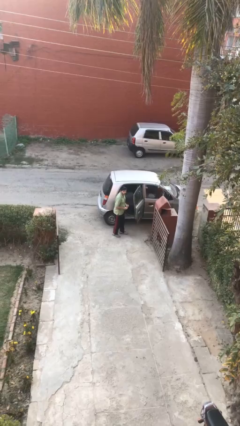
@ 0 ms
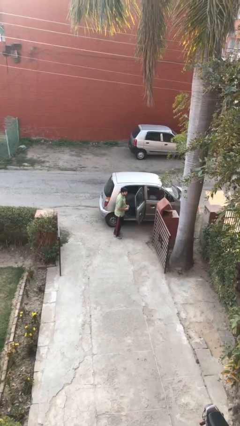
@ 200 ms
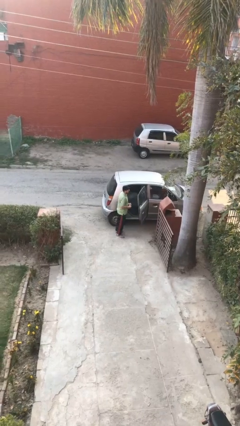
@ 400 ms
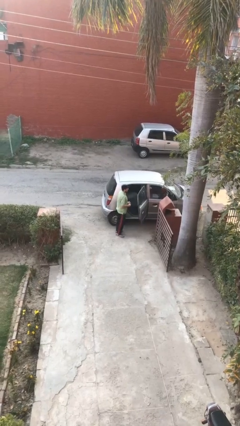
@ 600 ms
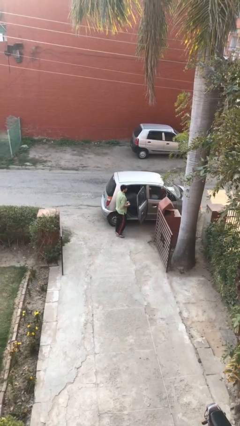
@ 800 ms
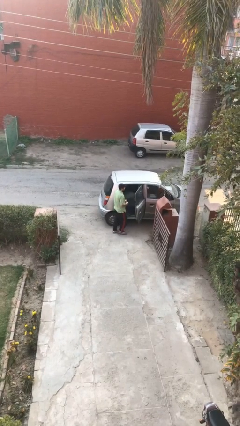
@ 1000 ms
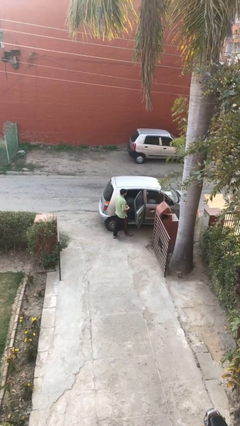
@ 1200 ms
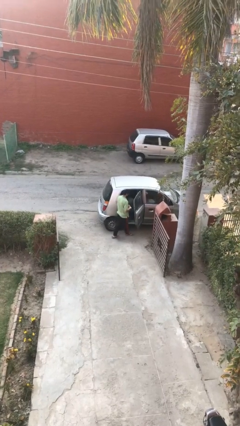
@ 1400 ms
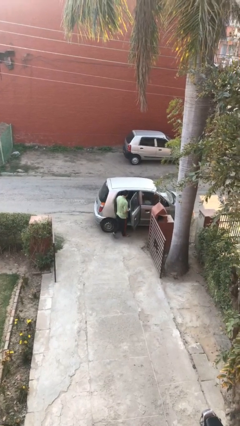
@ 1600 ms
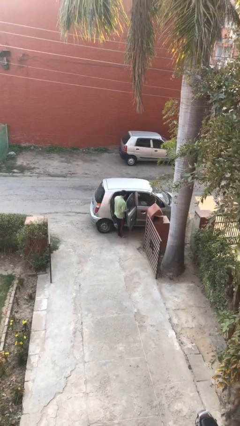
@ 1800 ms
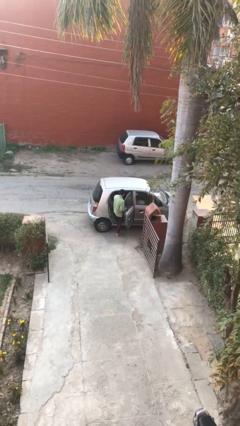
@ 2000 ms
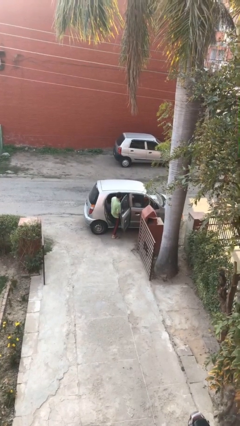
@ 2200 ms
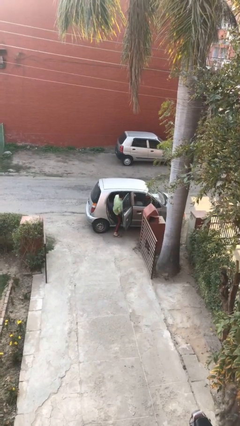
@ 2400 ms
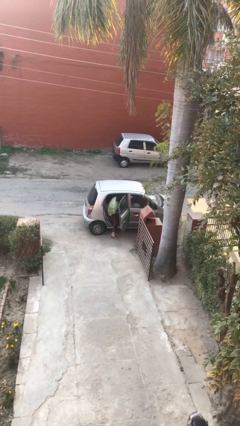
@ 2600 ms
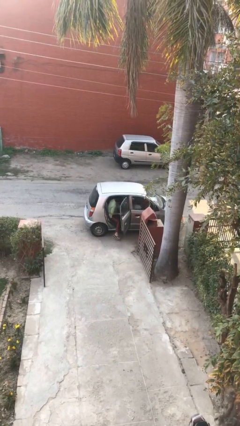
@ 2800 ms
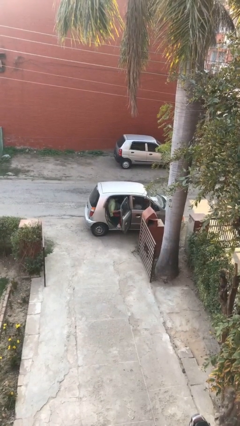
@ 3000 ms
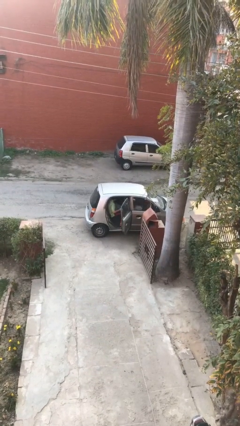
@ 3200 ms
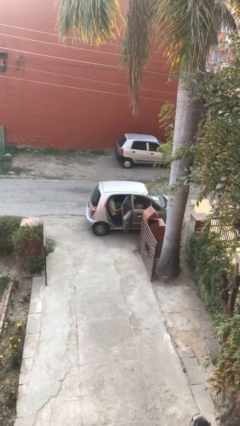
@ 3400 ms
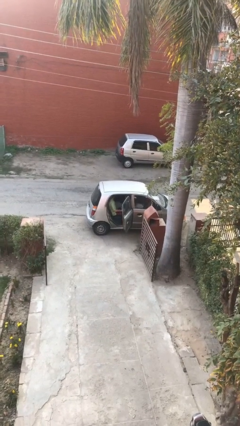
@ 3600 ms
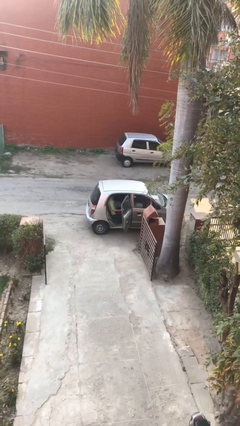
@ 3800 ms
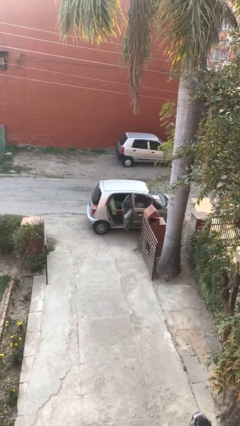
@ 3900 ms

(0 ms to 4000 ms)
person enters car

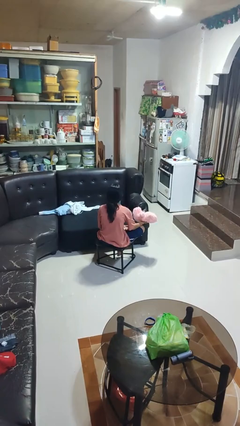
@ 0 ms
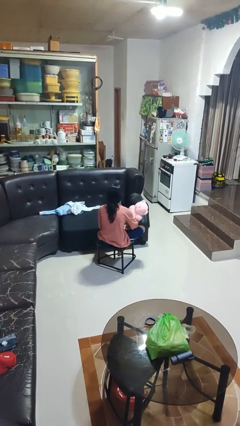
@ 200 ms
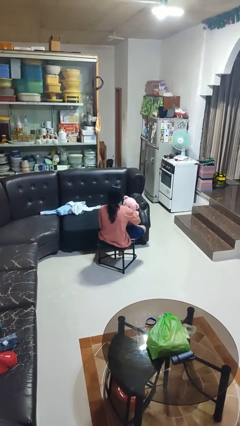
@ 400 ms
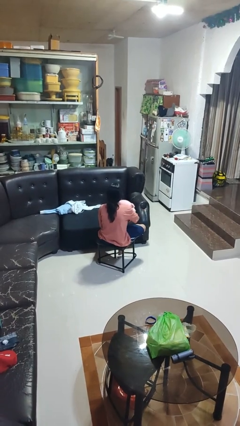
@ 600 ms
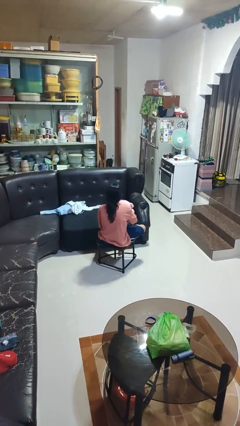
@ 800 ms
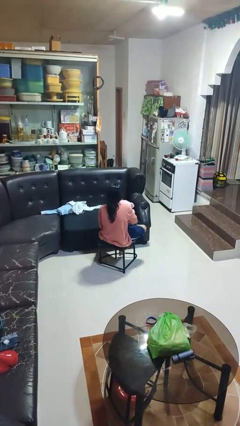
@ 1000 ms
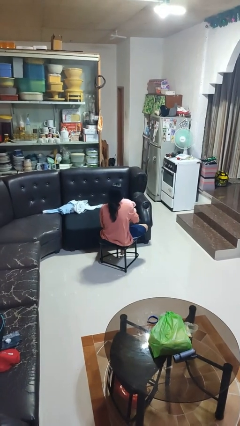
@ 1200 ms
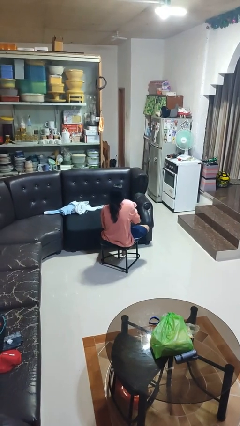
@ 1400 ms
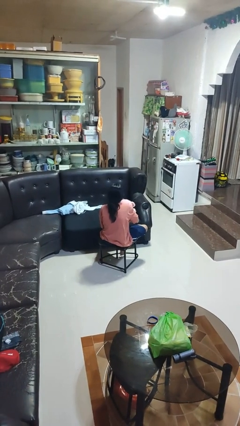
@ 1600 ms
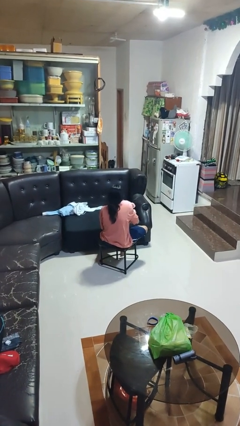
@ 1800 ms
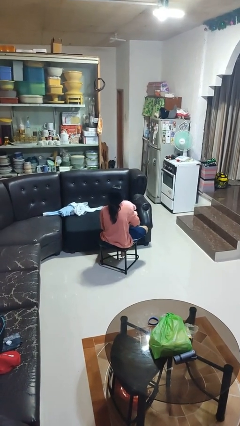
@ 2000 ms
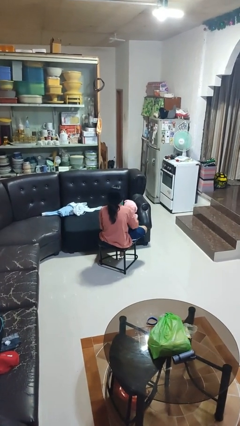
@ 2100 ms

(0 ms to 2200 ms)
person hugs stuffed animal

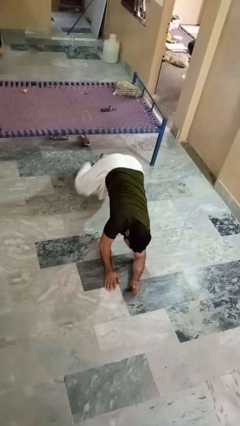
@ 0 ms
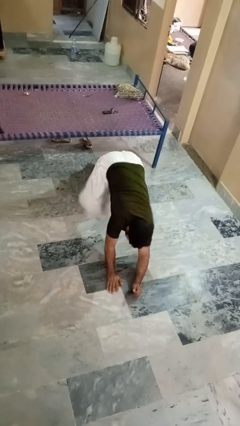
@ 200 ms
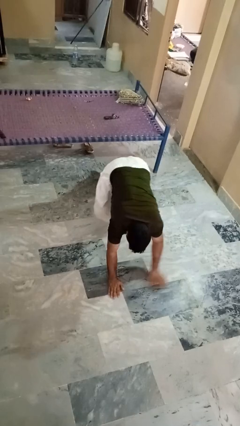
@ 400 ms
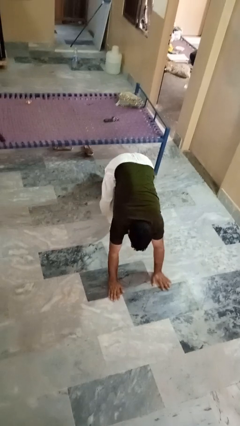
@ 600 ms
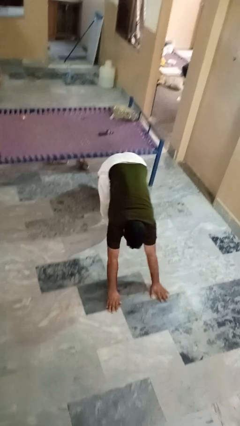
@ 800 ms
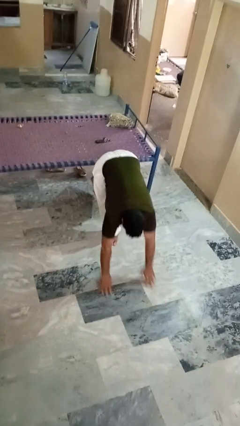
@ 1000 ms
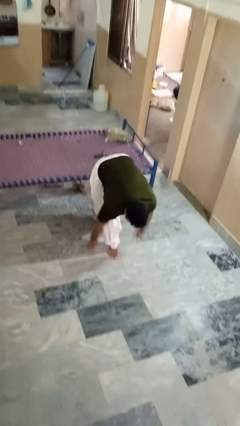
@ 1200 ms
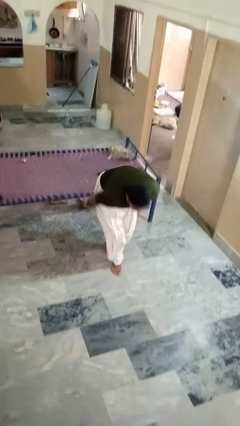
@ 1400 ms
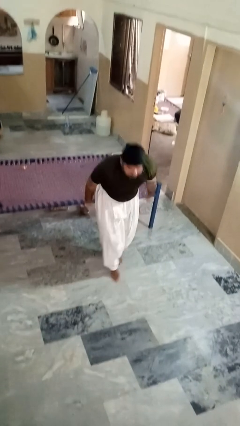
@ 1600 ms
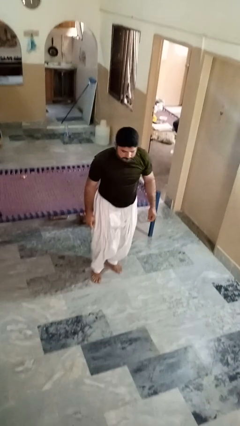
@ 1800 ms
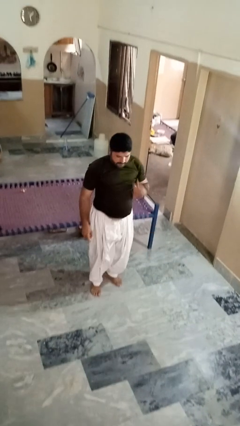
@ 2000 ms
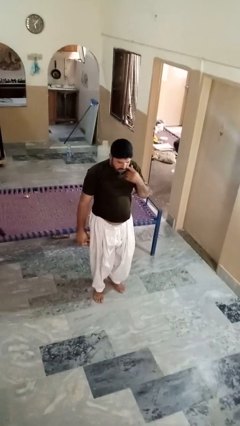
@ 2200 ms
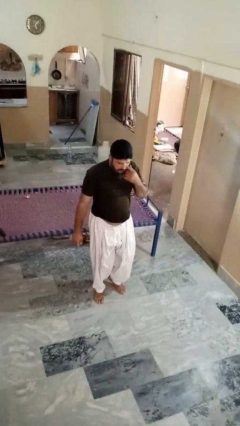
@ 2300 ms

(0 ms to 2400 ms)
person stands up from floor

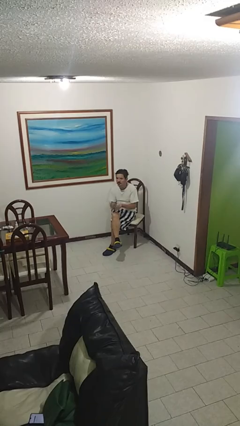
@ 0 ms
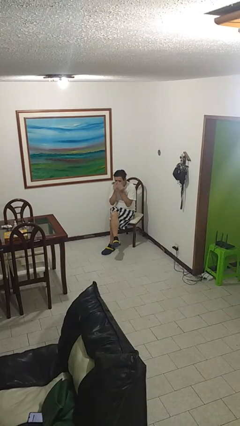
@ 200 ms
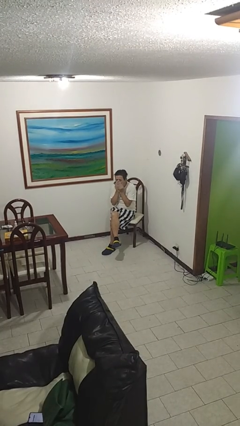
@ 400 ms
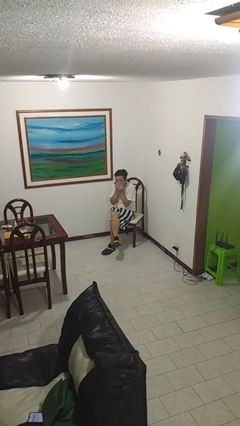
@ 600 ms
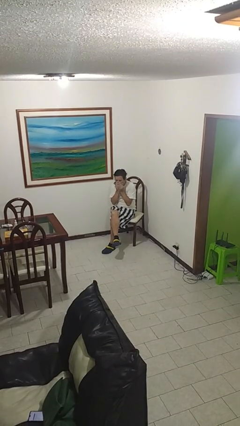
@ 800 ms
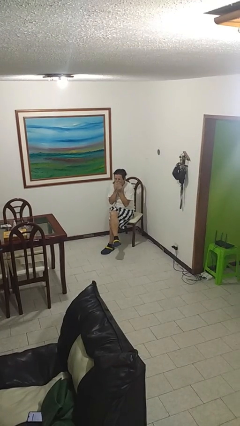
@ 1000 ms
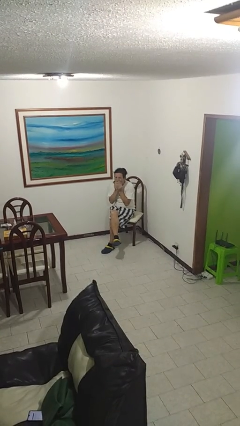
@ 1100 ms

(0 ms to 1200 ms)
person blows nose

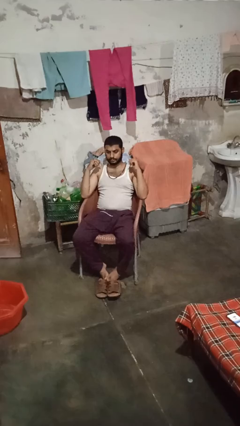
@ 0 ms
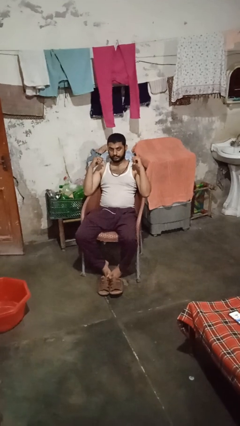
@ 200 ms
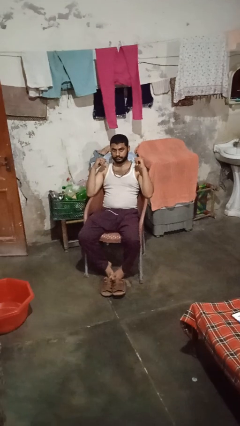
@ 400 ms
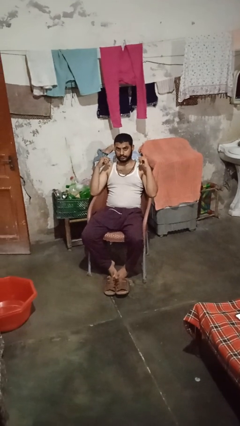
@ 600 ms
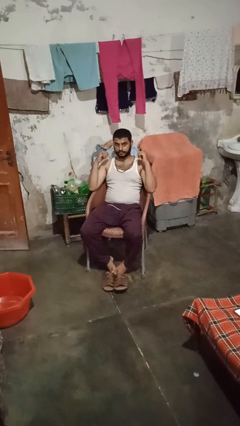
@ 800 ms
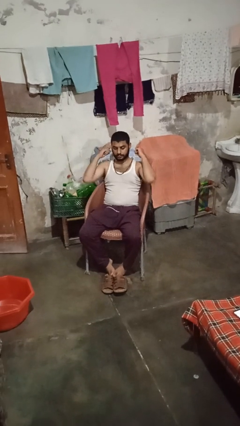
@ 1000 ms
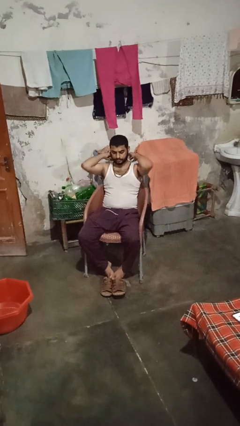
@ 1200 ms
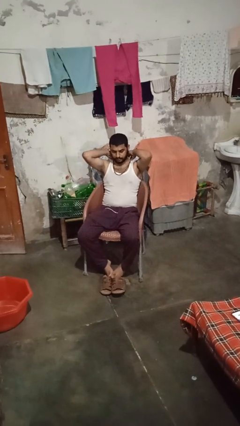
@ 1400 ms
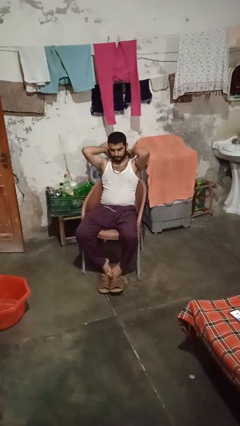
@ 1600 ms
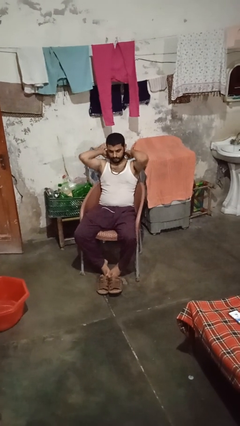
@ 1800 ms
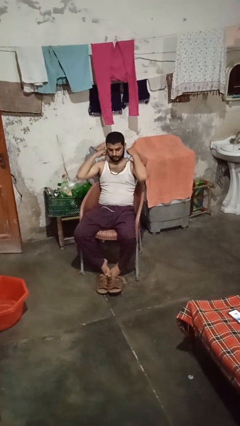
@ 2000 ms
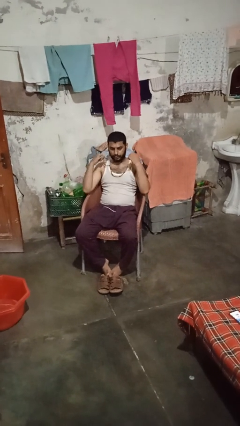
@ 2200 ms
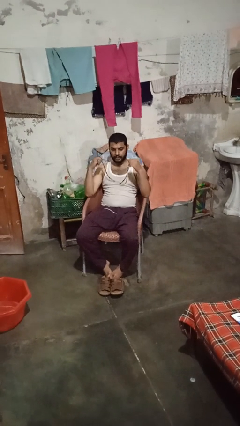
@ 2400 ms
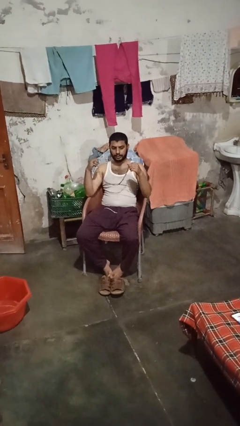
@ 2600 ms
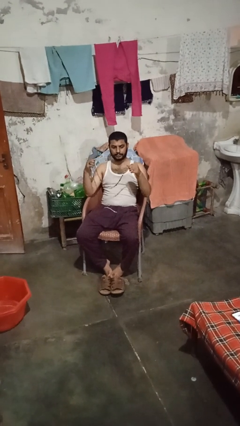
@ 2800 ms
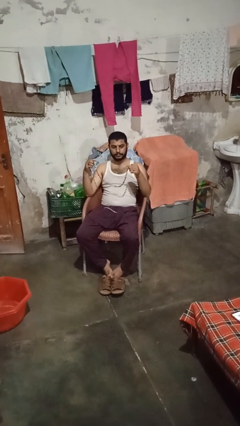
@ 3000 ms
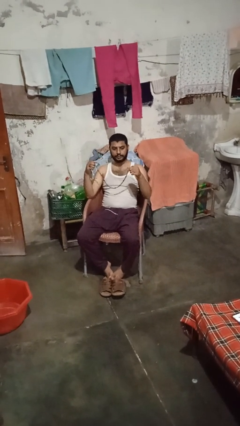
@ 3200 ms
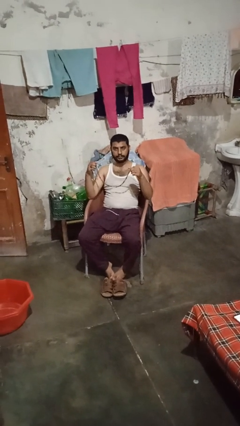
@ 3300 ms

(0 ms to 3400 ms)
person takes off necklace

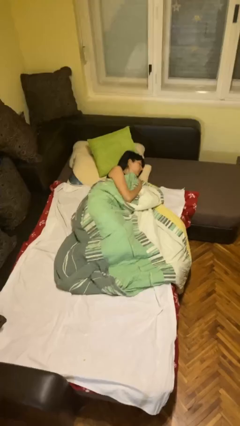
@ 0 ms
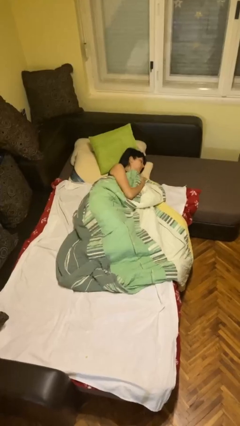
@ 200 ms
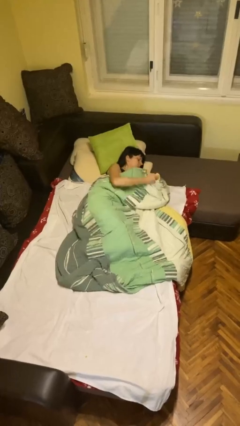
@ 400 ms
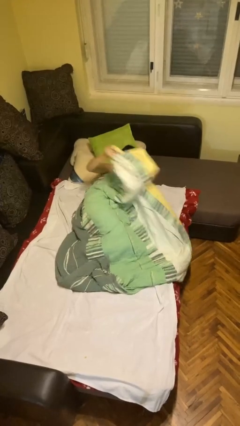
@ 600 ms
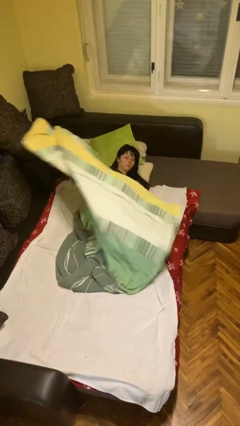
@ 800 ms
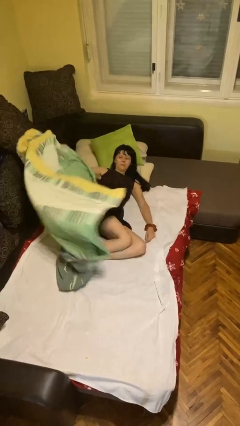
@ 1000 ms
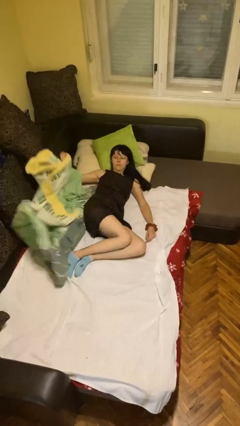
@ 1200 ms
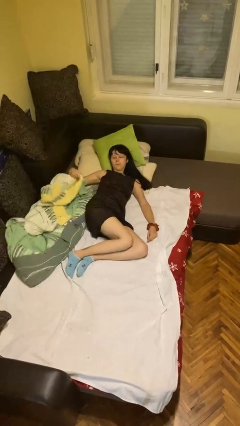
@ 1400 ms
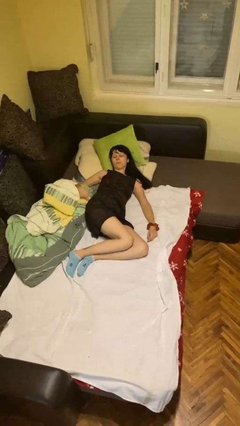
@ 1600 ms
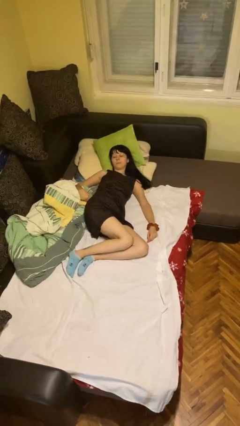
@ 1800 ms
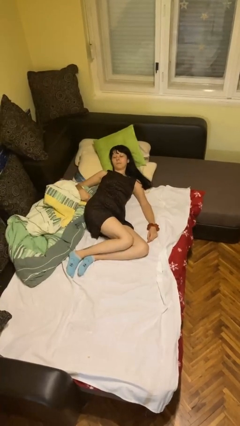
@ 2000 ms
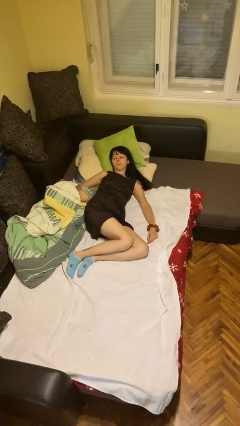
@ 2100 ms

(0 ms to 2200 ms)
person uncovers with bedsheets

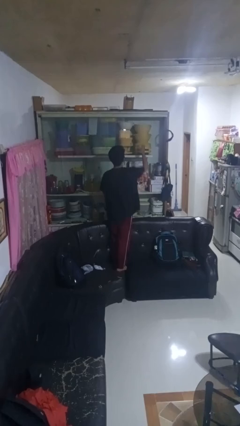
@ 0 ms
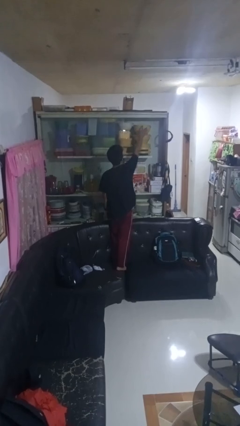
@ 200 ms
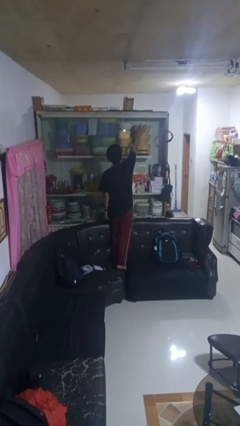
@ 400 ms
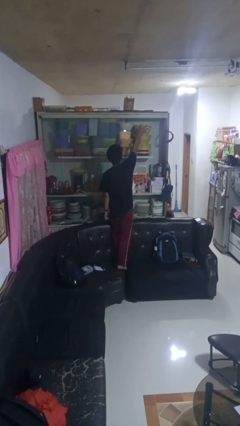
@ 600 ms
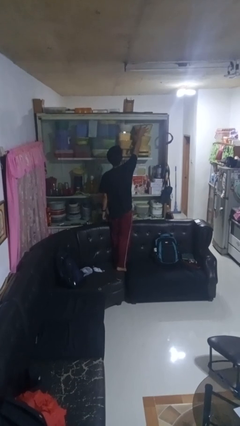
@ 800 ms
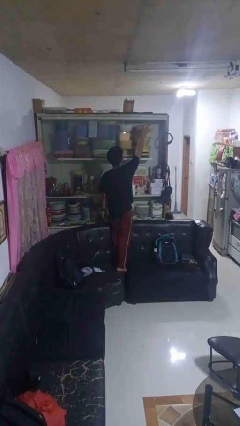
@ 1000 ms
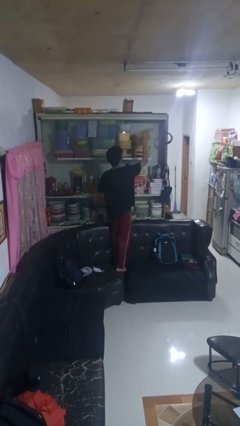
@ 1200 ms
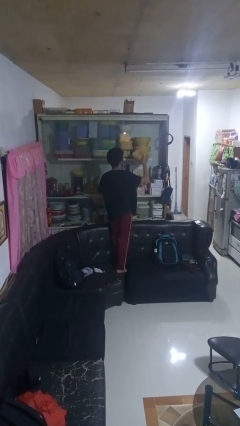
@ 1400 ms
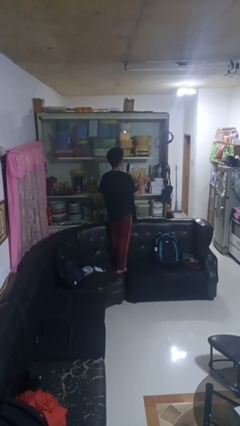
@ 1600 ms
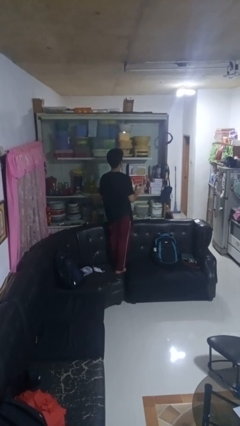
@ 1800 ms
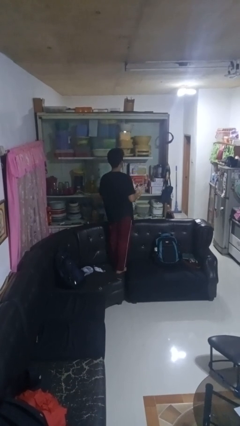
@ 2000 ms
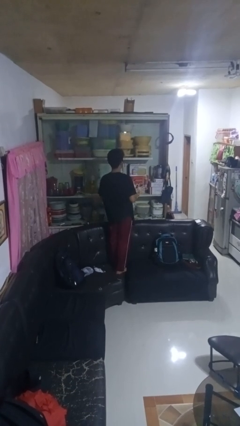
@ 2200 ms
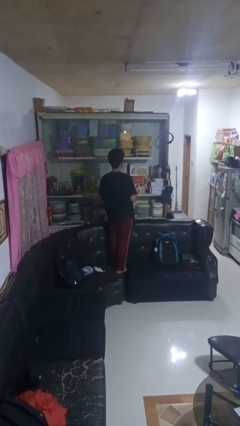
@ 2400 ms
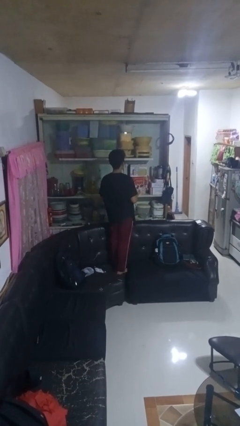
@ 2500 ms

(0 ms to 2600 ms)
person picks up object from cabinet
